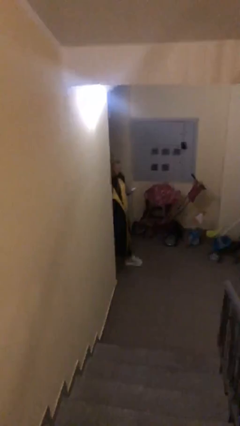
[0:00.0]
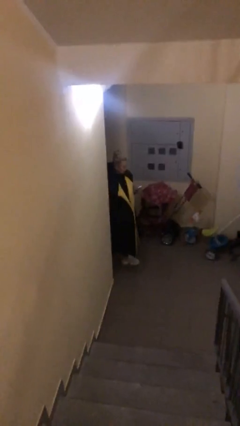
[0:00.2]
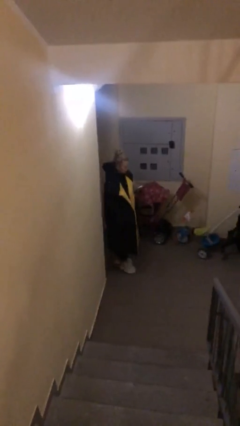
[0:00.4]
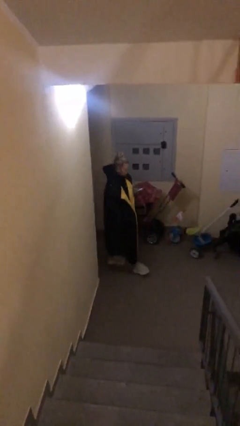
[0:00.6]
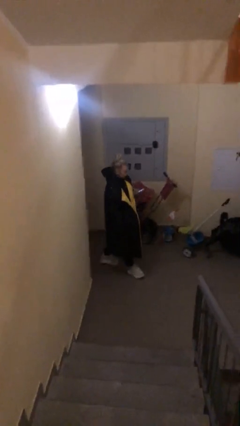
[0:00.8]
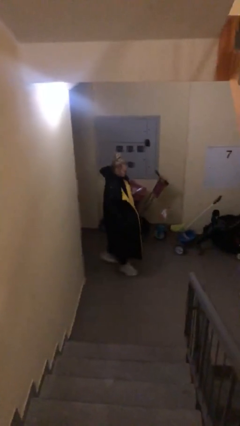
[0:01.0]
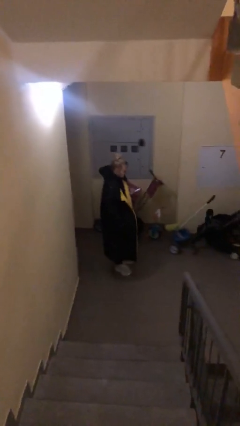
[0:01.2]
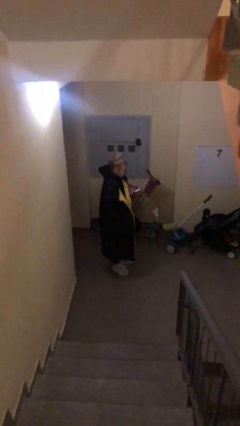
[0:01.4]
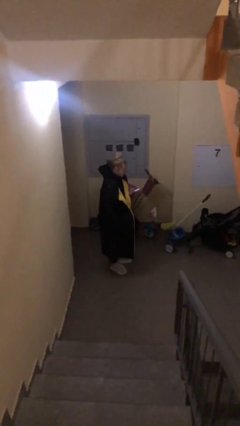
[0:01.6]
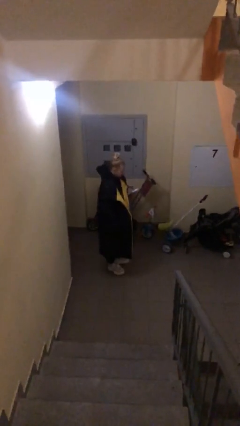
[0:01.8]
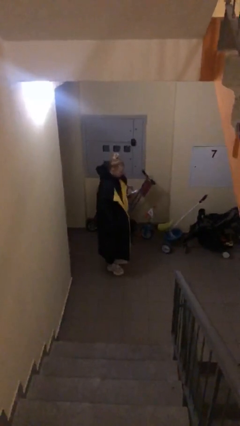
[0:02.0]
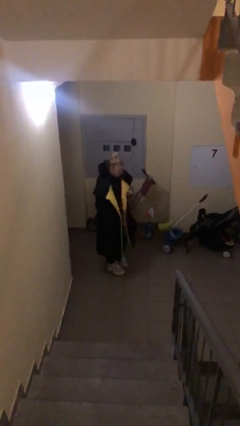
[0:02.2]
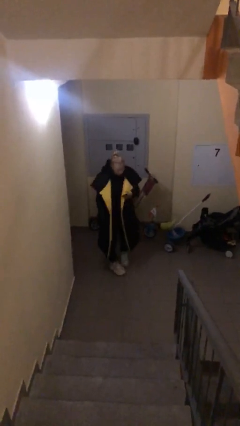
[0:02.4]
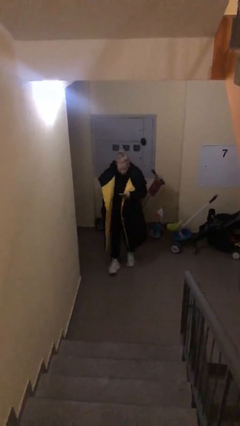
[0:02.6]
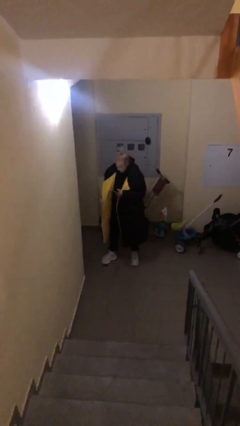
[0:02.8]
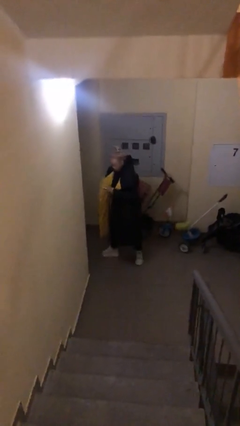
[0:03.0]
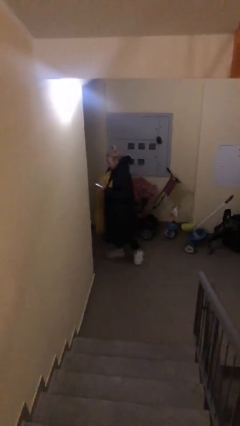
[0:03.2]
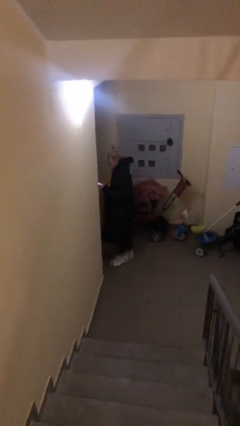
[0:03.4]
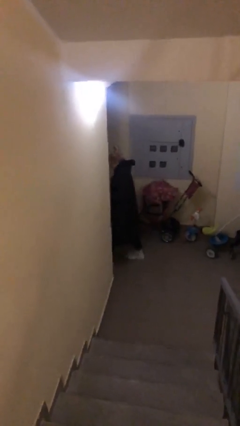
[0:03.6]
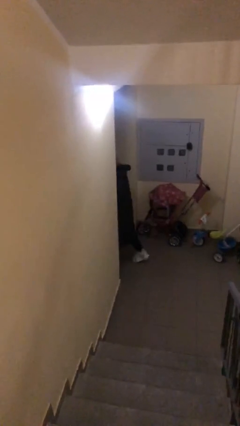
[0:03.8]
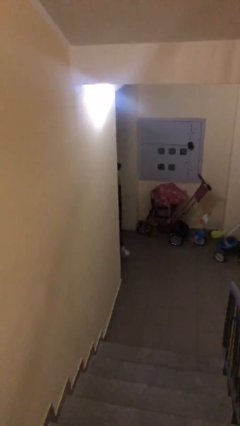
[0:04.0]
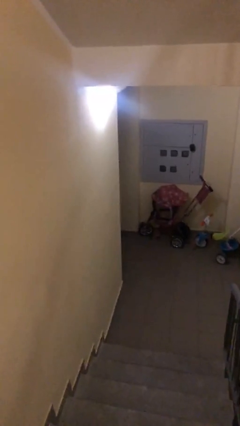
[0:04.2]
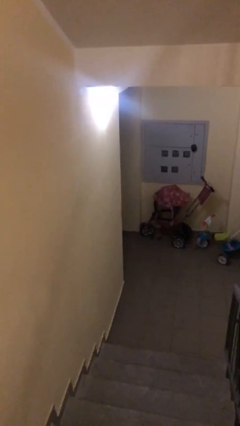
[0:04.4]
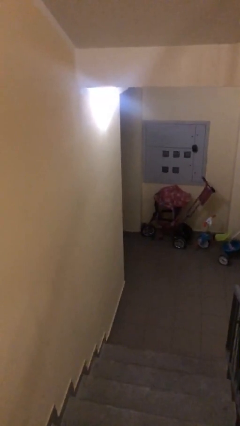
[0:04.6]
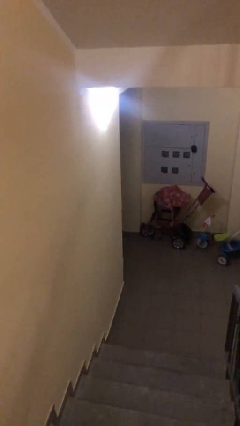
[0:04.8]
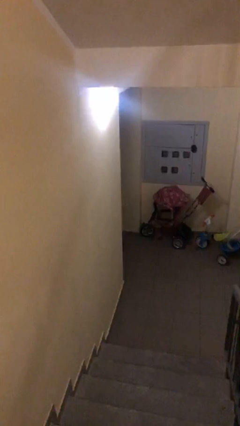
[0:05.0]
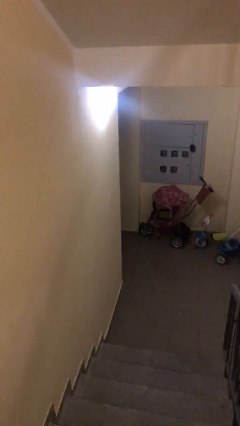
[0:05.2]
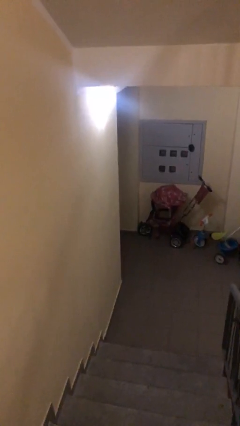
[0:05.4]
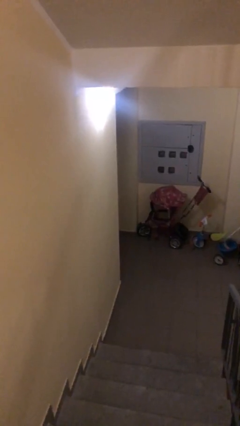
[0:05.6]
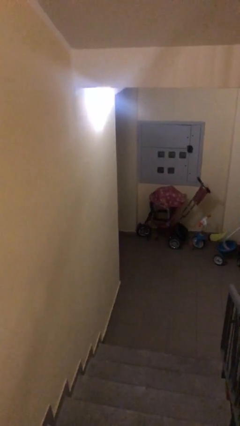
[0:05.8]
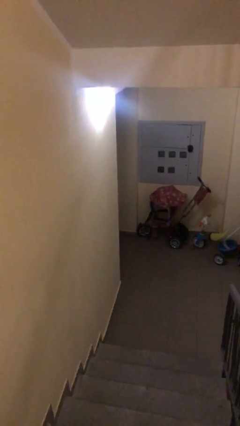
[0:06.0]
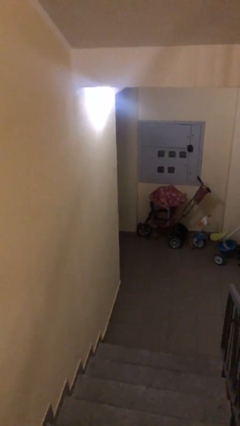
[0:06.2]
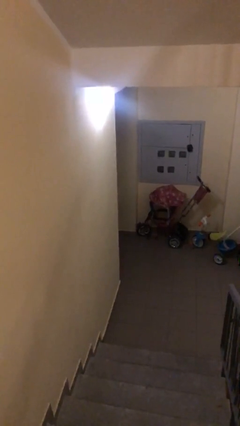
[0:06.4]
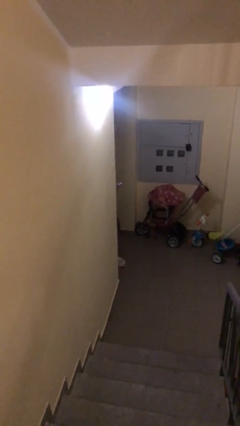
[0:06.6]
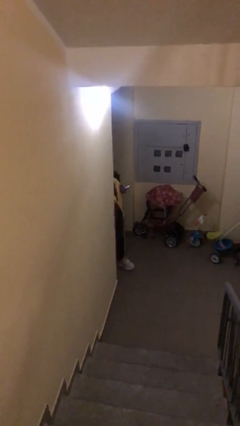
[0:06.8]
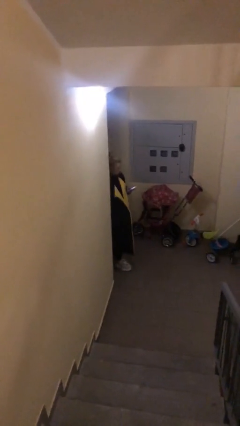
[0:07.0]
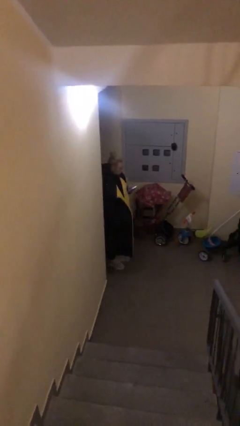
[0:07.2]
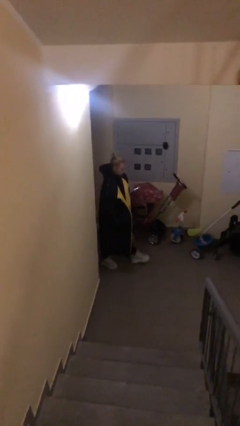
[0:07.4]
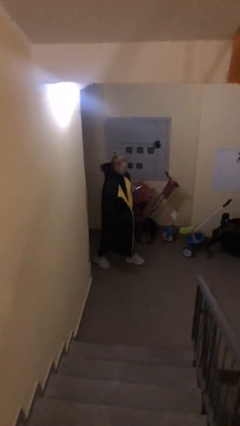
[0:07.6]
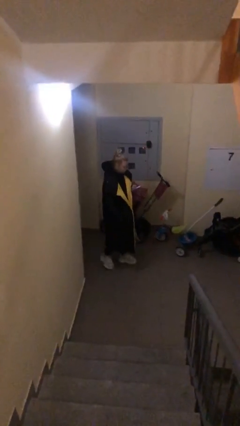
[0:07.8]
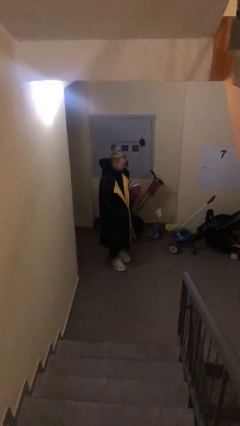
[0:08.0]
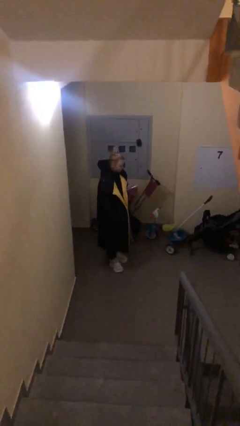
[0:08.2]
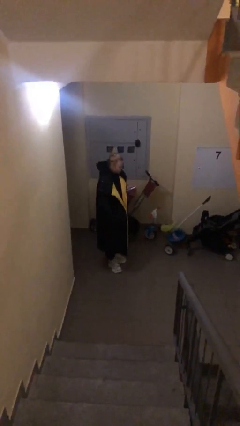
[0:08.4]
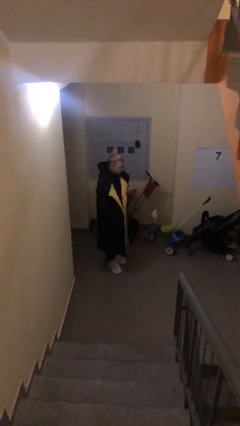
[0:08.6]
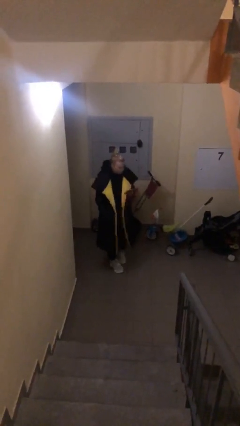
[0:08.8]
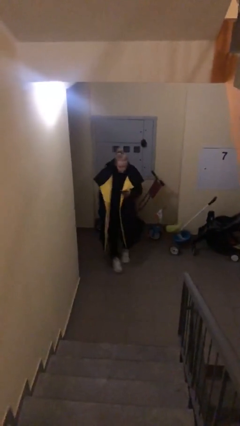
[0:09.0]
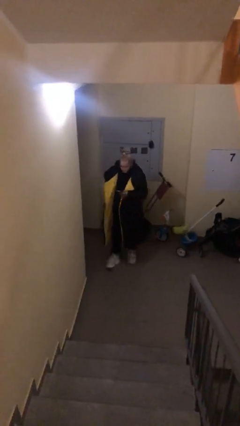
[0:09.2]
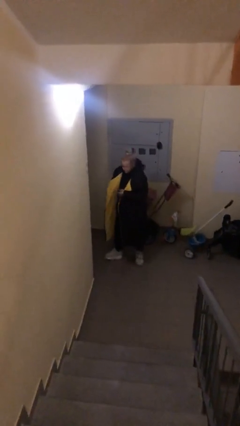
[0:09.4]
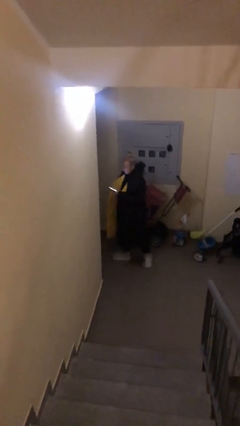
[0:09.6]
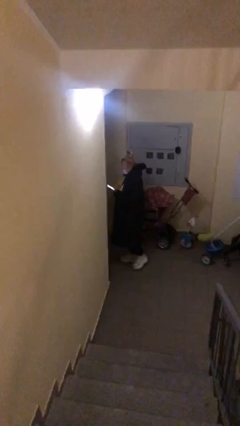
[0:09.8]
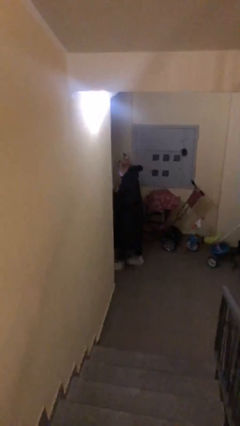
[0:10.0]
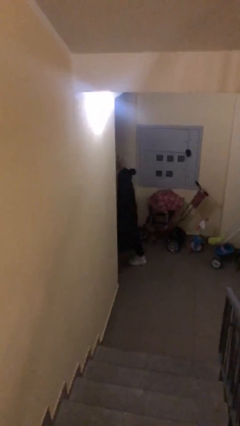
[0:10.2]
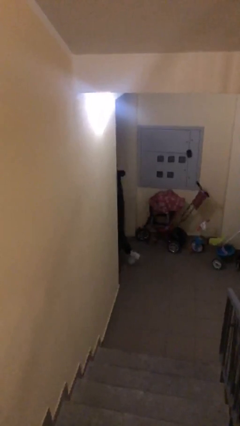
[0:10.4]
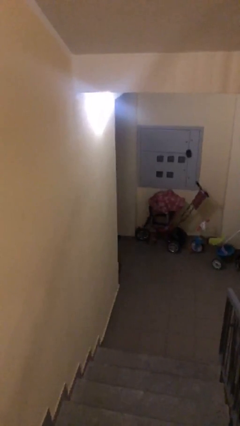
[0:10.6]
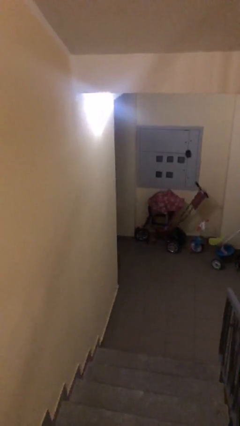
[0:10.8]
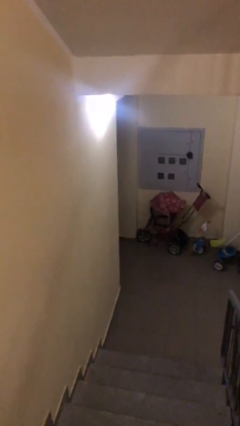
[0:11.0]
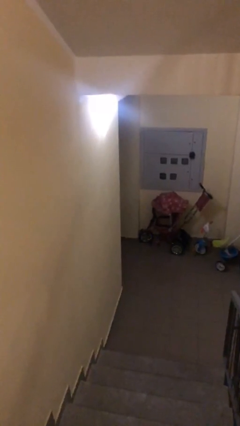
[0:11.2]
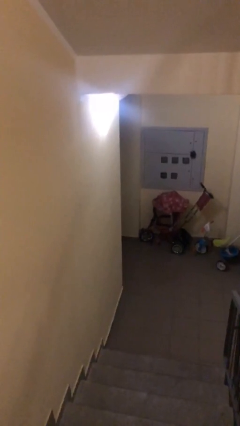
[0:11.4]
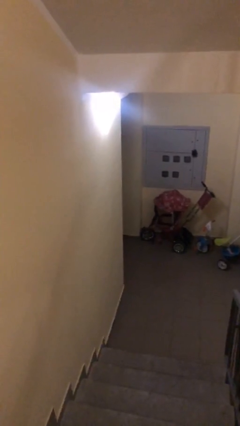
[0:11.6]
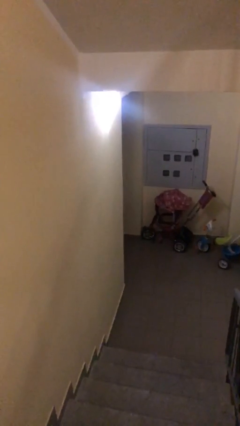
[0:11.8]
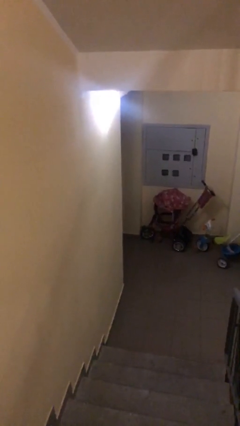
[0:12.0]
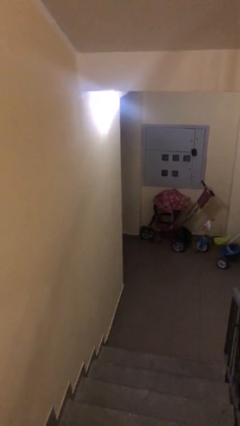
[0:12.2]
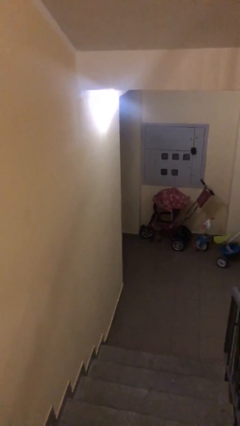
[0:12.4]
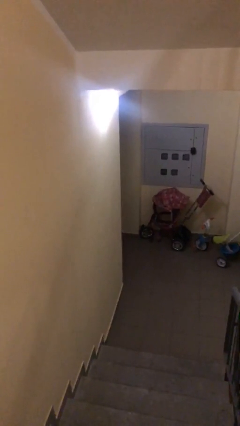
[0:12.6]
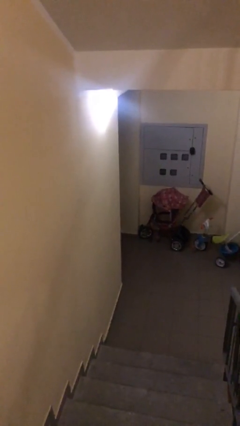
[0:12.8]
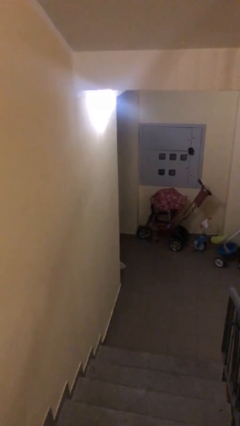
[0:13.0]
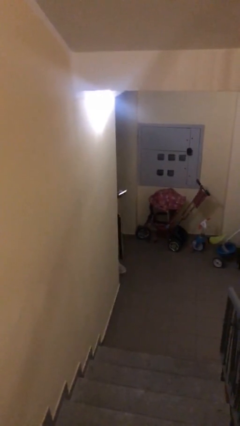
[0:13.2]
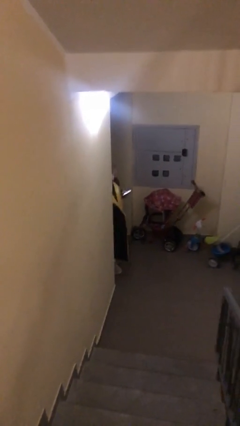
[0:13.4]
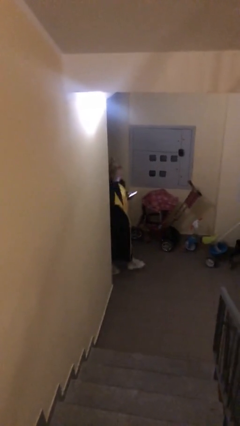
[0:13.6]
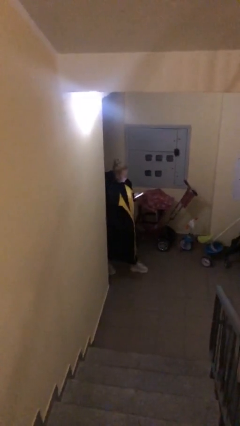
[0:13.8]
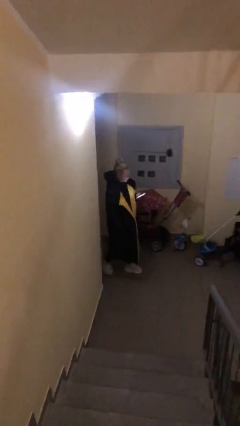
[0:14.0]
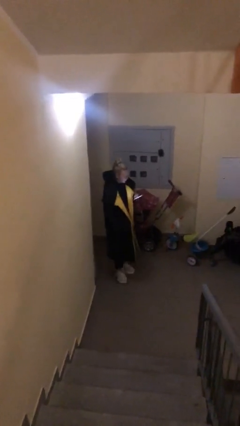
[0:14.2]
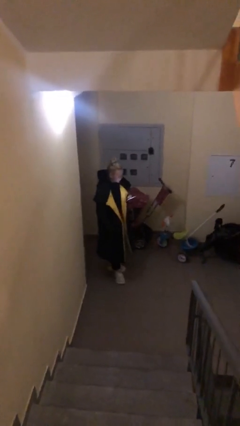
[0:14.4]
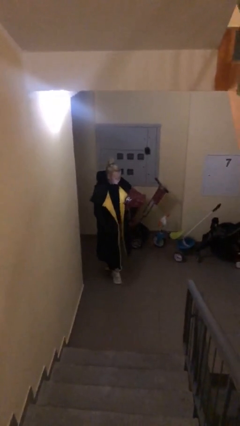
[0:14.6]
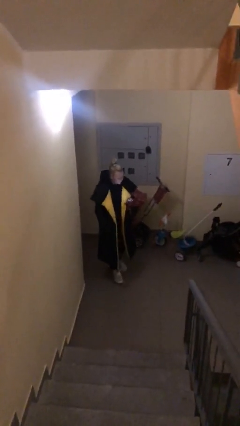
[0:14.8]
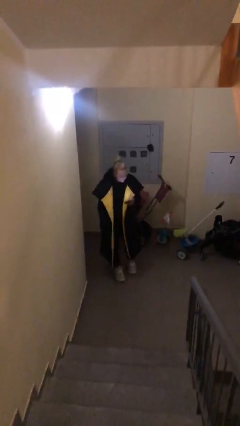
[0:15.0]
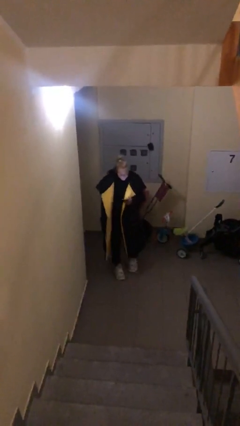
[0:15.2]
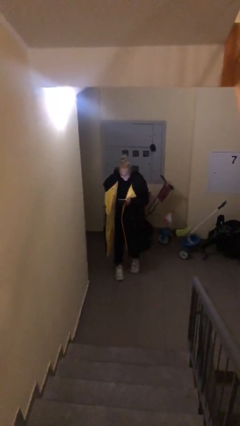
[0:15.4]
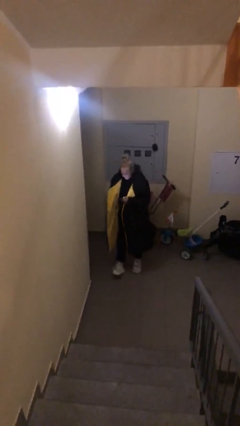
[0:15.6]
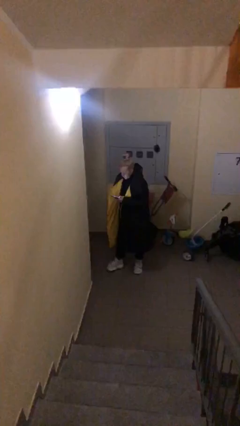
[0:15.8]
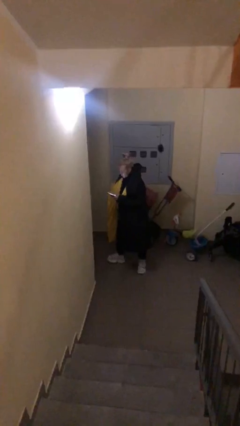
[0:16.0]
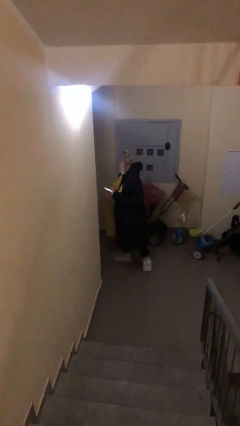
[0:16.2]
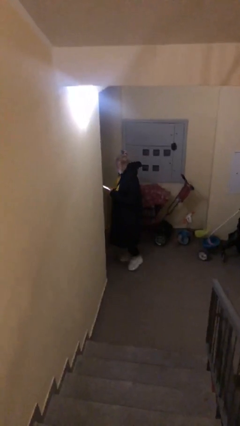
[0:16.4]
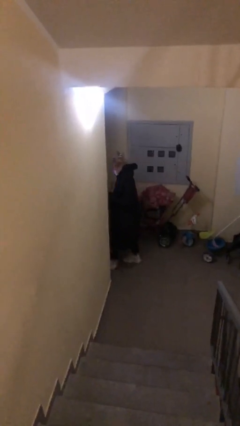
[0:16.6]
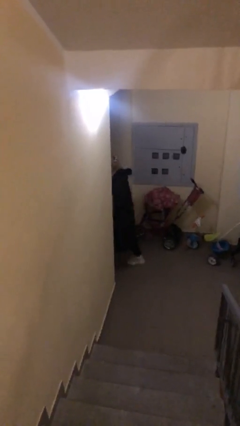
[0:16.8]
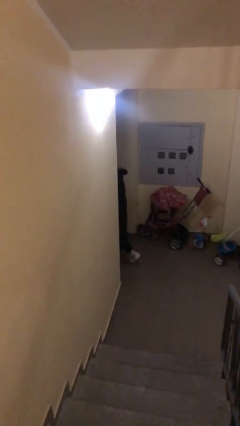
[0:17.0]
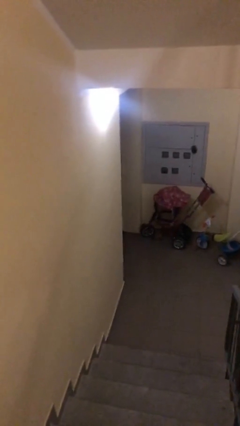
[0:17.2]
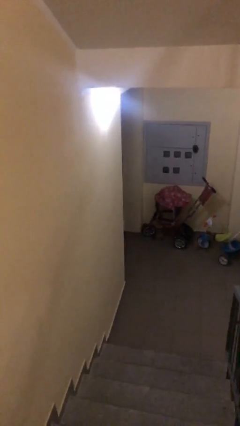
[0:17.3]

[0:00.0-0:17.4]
person texts on phone

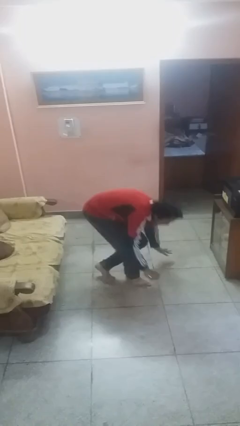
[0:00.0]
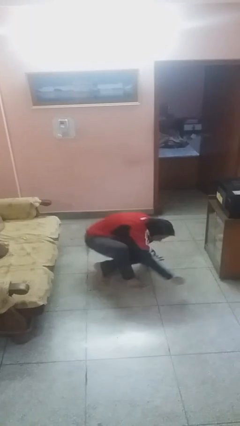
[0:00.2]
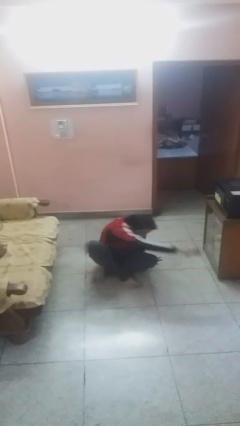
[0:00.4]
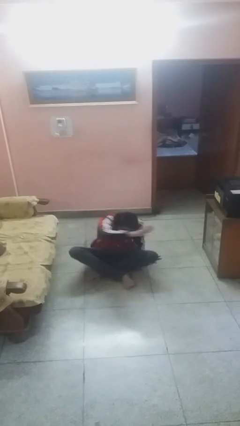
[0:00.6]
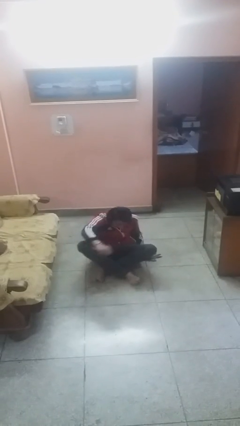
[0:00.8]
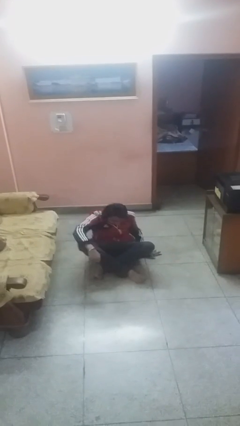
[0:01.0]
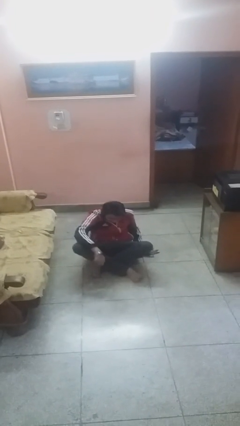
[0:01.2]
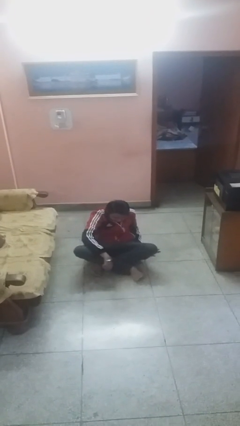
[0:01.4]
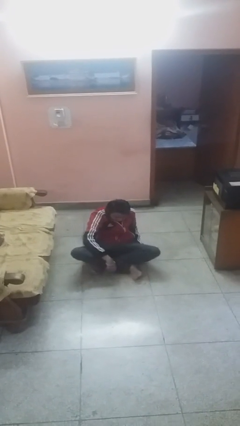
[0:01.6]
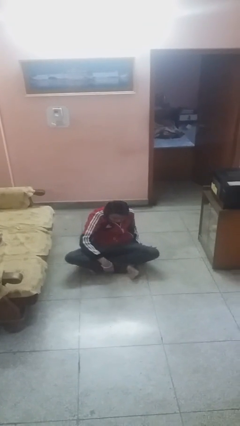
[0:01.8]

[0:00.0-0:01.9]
person sits down
